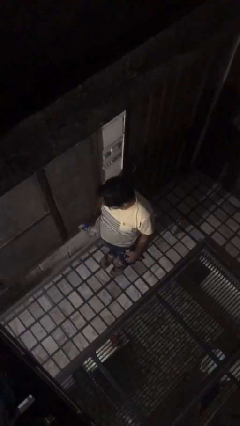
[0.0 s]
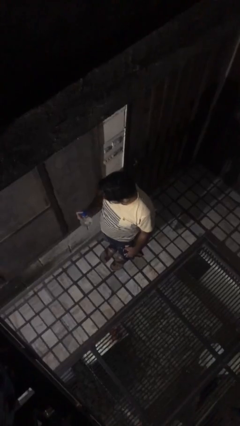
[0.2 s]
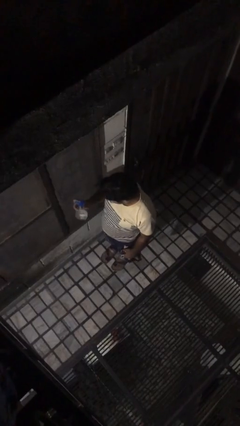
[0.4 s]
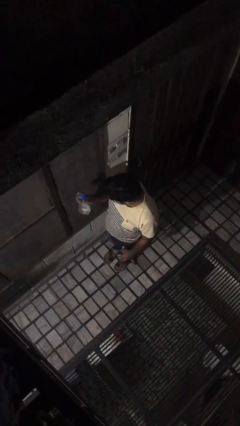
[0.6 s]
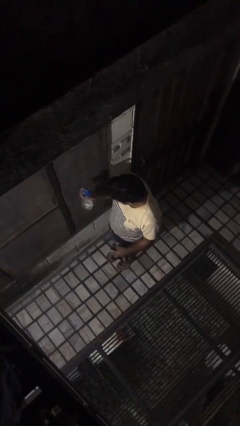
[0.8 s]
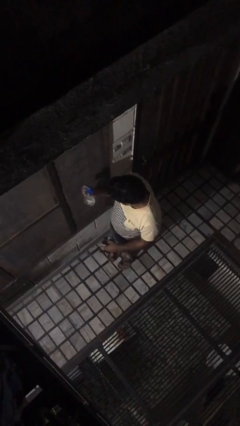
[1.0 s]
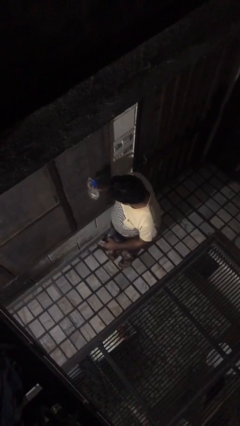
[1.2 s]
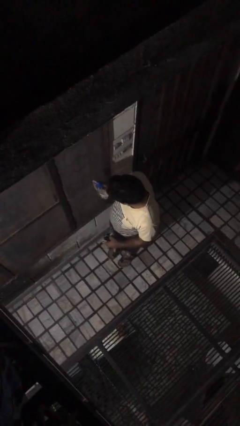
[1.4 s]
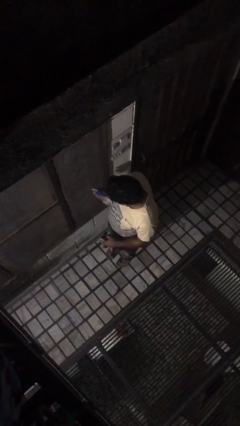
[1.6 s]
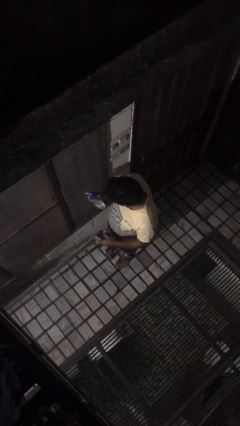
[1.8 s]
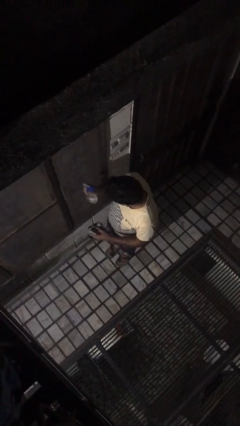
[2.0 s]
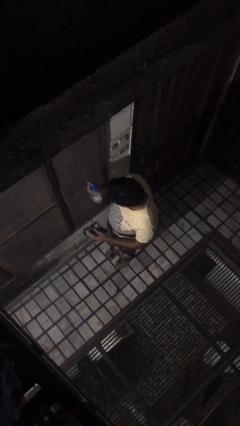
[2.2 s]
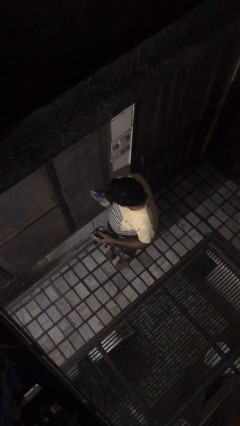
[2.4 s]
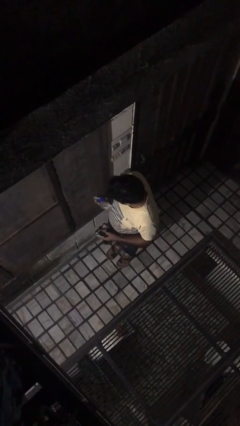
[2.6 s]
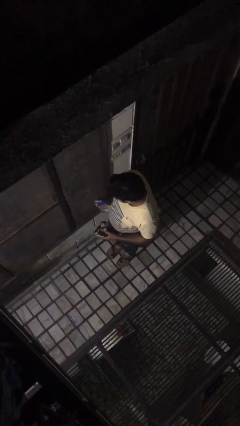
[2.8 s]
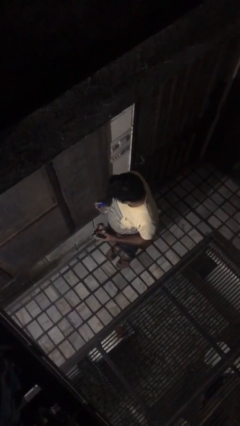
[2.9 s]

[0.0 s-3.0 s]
person sprays from bottle

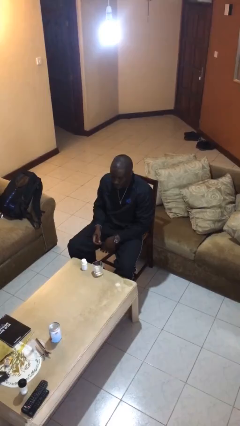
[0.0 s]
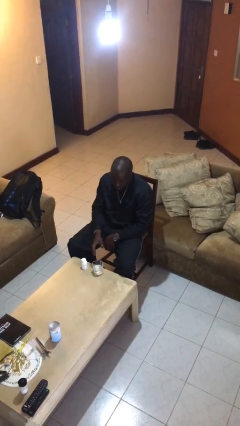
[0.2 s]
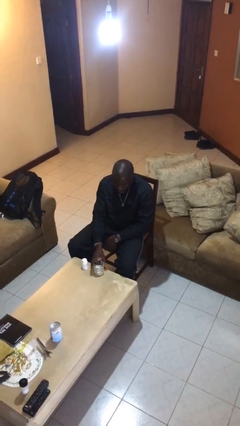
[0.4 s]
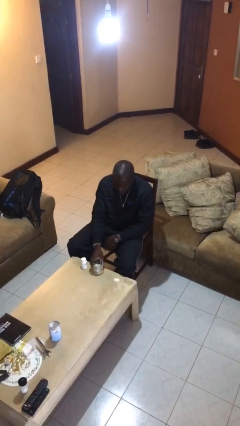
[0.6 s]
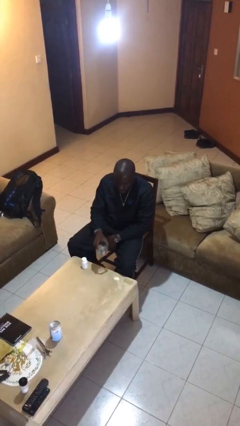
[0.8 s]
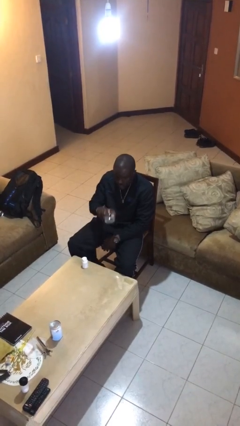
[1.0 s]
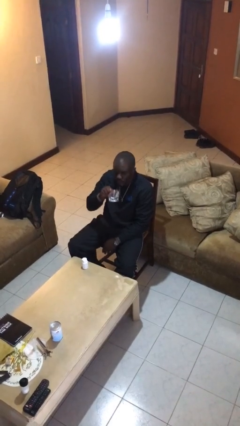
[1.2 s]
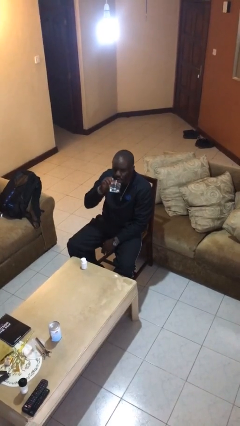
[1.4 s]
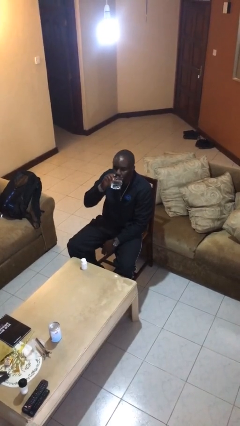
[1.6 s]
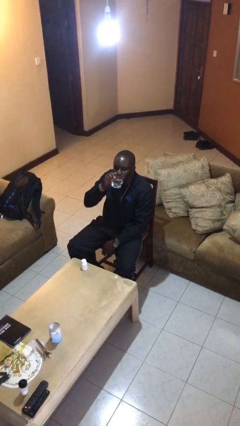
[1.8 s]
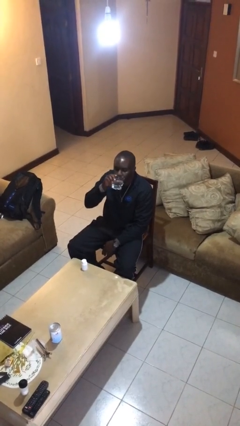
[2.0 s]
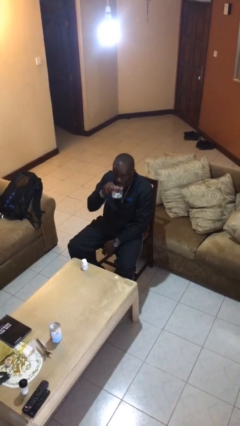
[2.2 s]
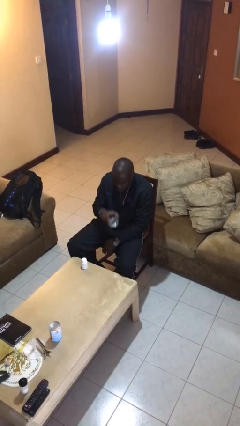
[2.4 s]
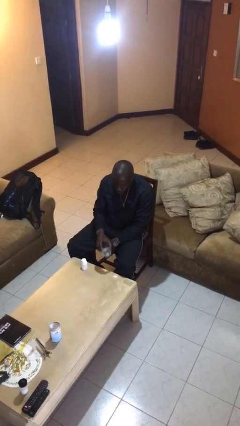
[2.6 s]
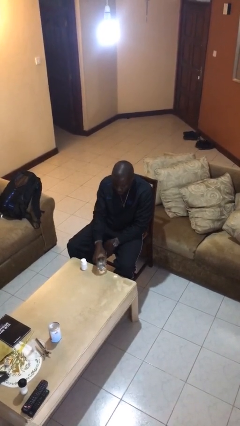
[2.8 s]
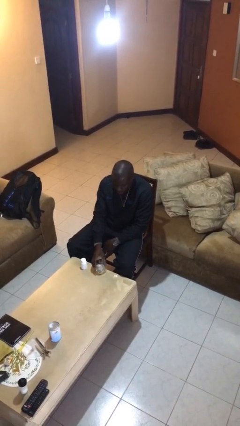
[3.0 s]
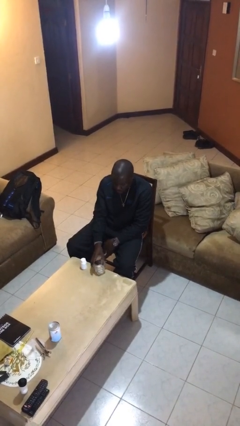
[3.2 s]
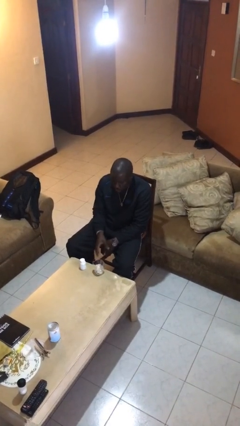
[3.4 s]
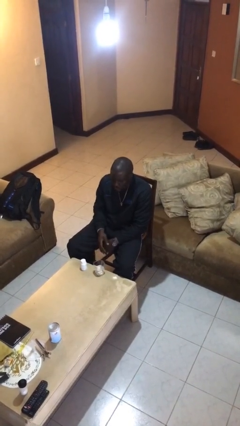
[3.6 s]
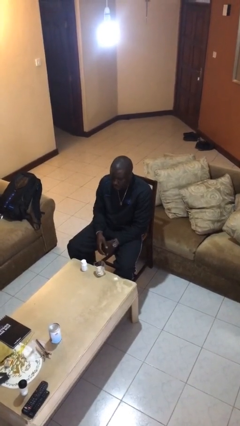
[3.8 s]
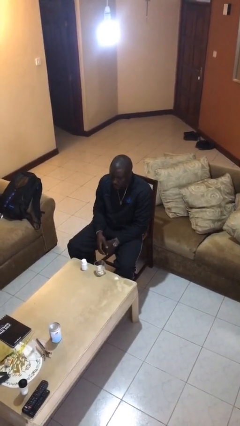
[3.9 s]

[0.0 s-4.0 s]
person drinks from cup

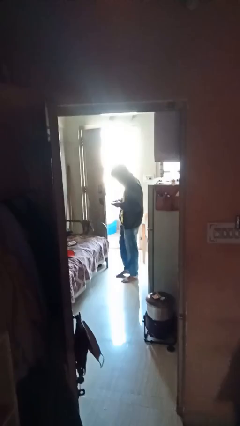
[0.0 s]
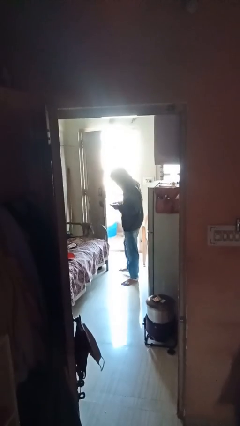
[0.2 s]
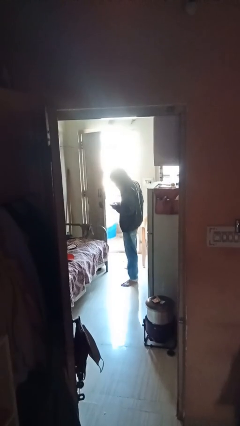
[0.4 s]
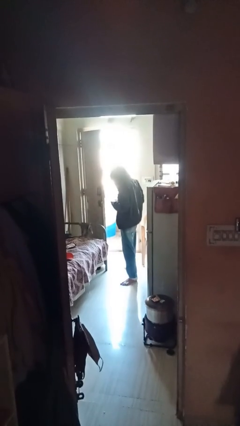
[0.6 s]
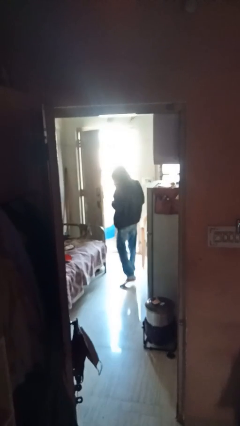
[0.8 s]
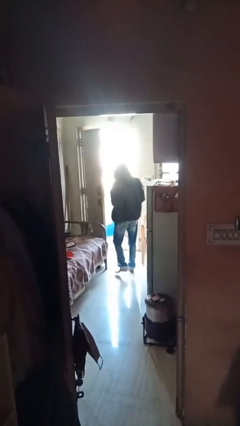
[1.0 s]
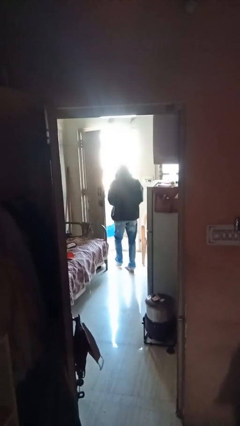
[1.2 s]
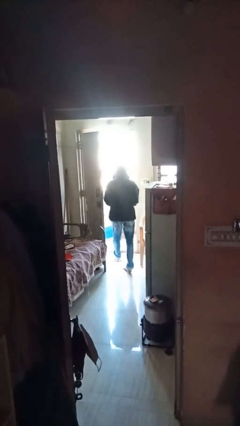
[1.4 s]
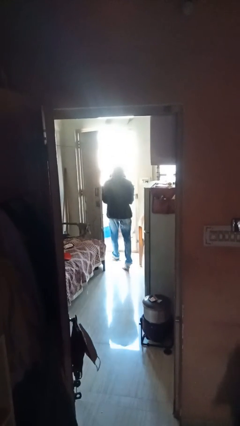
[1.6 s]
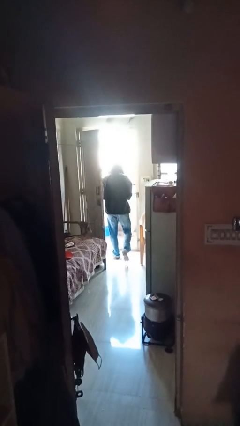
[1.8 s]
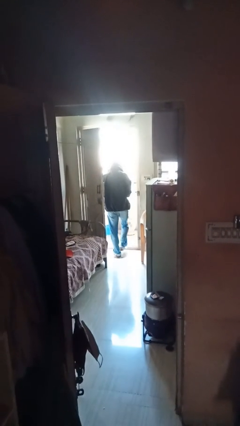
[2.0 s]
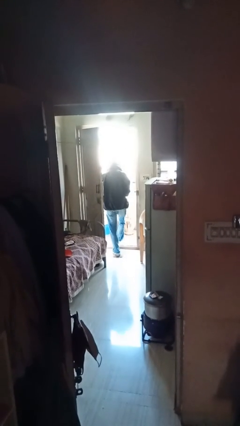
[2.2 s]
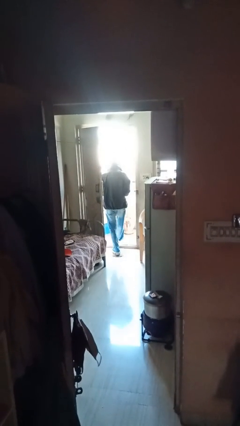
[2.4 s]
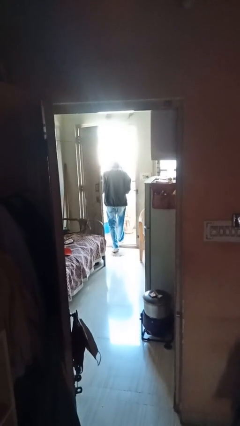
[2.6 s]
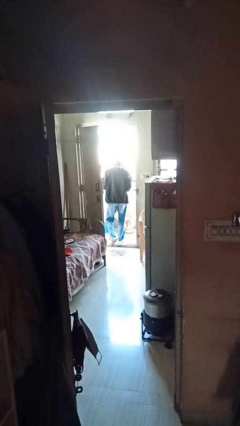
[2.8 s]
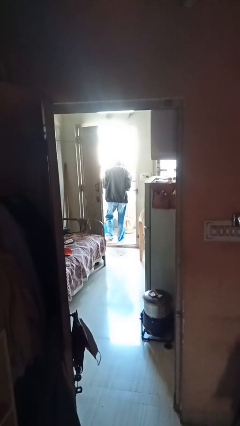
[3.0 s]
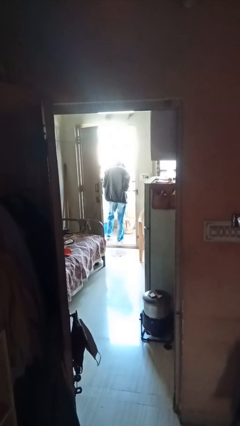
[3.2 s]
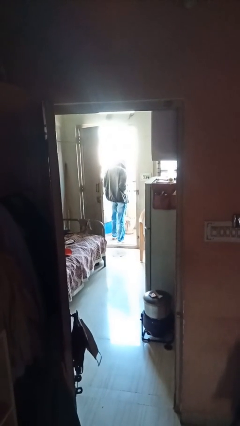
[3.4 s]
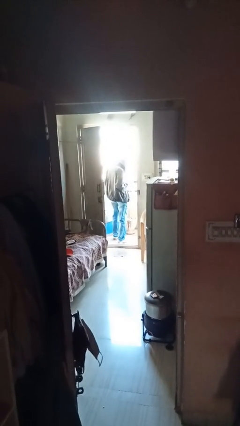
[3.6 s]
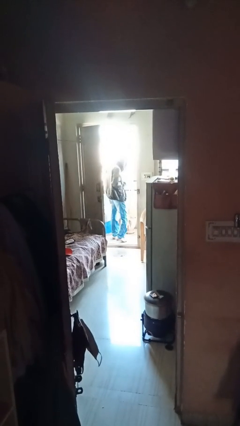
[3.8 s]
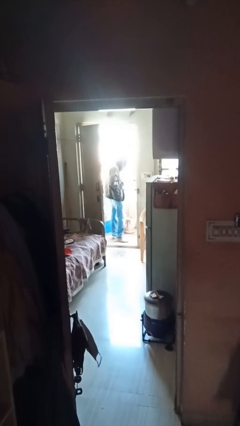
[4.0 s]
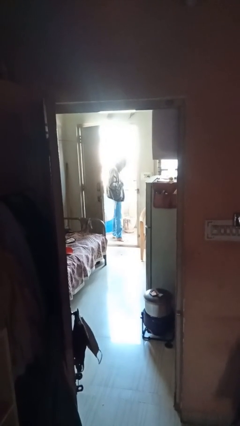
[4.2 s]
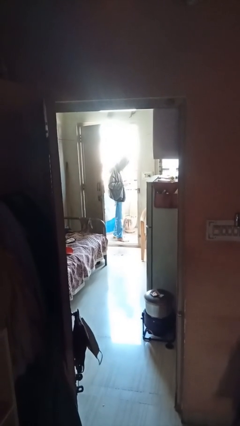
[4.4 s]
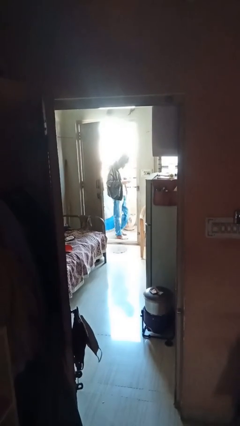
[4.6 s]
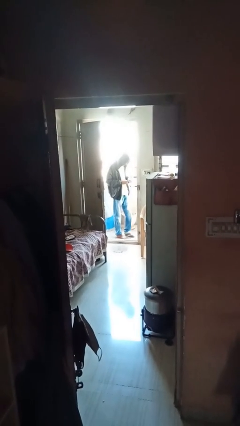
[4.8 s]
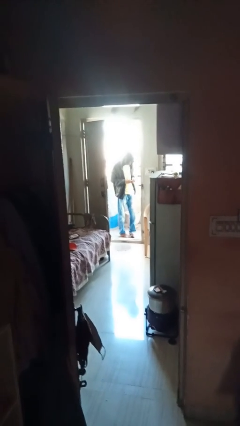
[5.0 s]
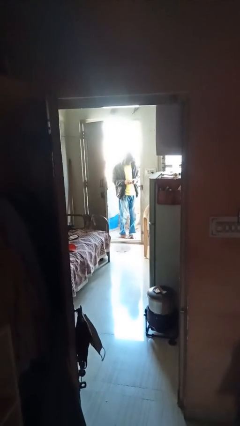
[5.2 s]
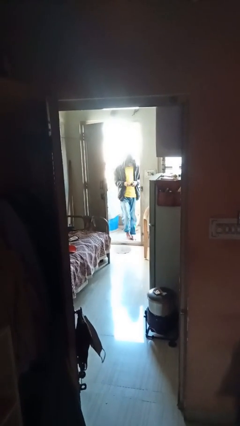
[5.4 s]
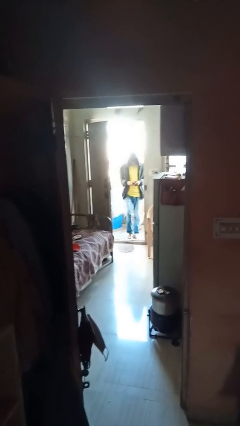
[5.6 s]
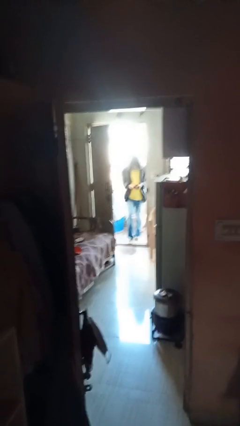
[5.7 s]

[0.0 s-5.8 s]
person exits scene through structure

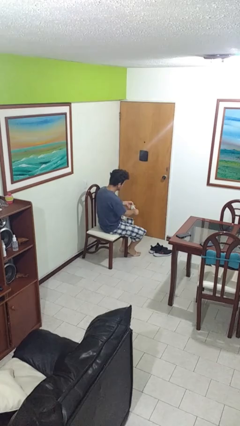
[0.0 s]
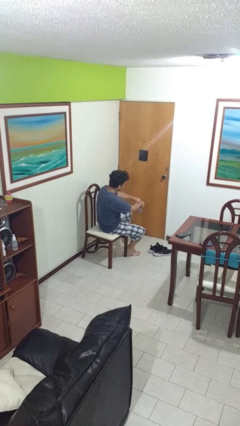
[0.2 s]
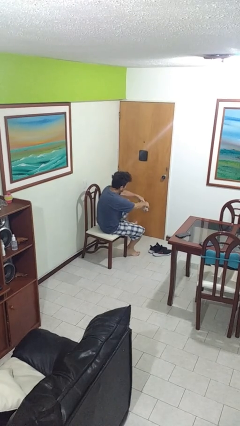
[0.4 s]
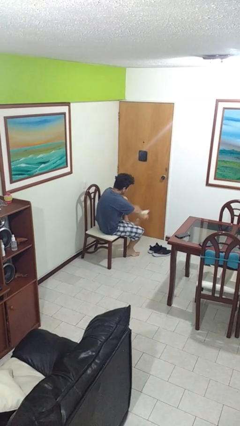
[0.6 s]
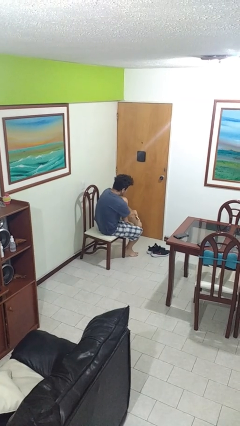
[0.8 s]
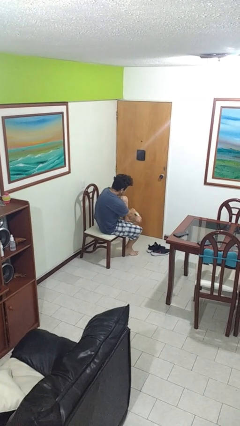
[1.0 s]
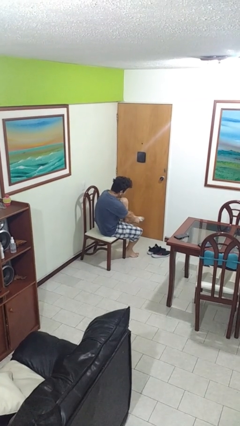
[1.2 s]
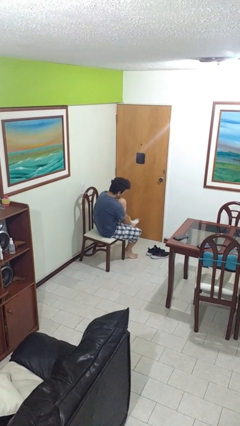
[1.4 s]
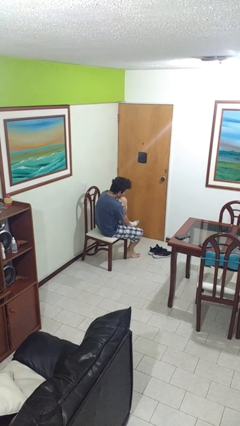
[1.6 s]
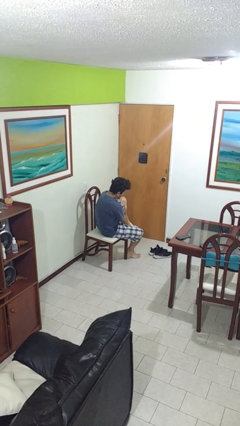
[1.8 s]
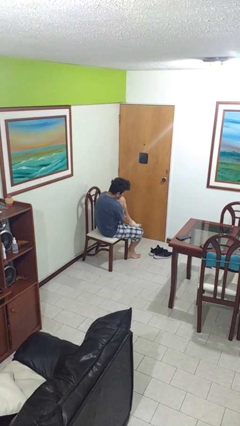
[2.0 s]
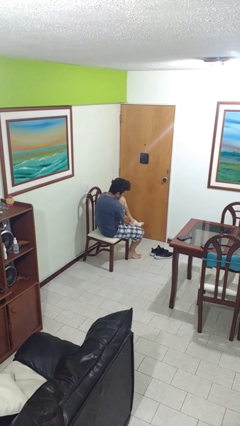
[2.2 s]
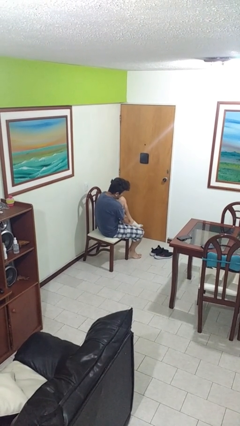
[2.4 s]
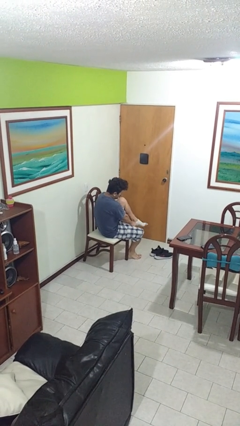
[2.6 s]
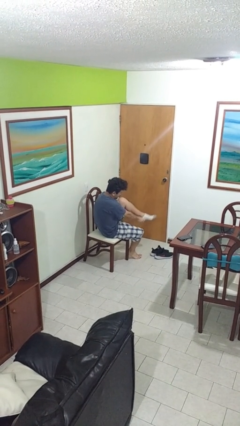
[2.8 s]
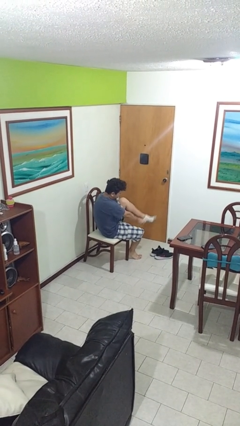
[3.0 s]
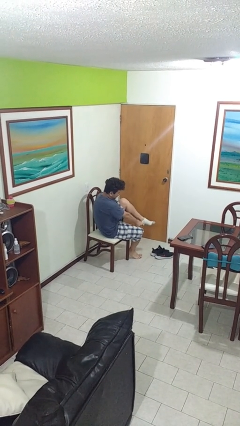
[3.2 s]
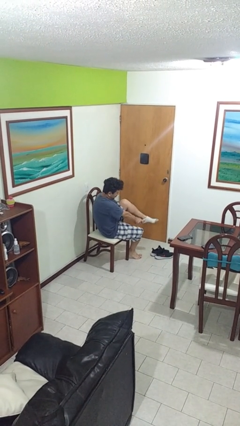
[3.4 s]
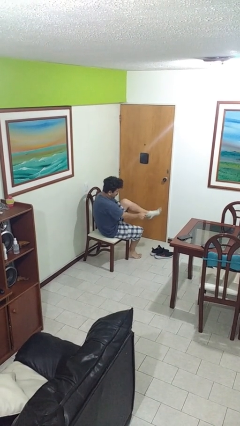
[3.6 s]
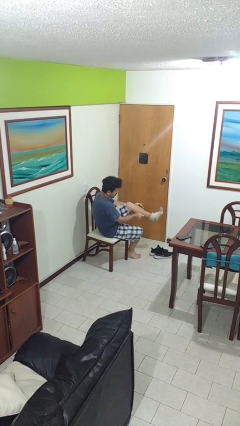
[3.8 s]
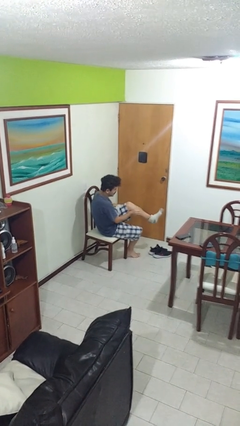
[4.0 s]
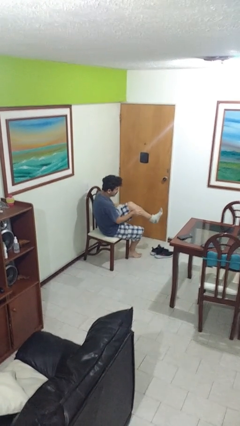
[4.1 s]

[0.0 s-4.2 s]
person puts on socks

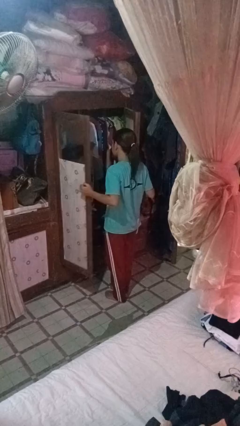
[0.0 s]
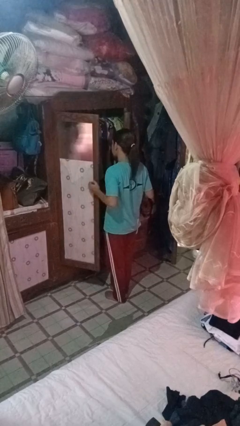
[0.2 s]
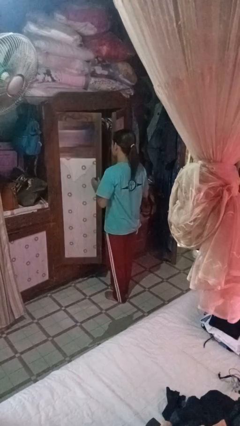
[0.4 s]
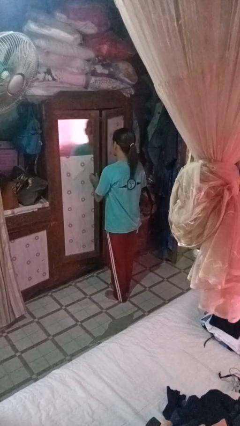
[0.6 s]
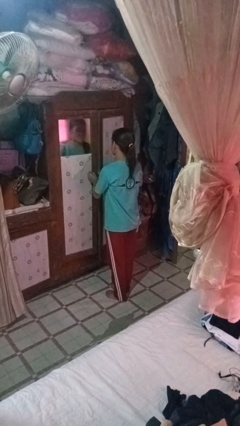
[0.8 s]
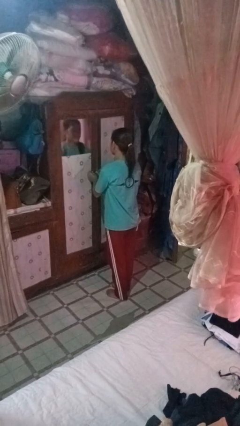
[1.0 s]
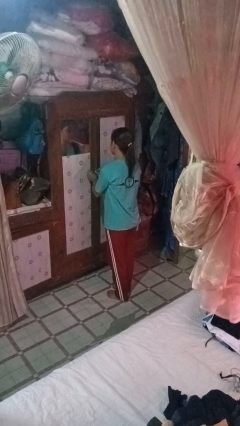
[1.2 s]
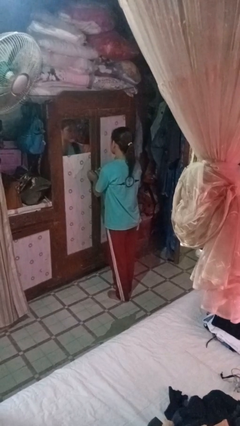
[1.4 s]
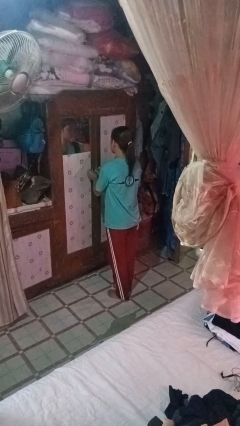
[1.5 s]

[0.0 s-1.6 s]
person closes closet door
